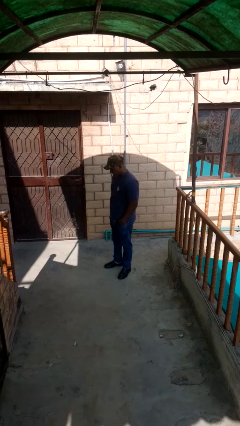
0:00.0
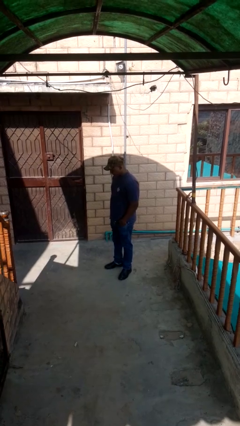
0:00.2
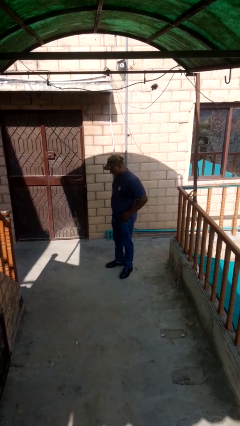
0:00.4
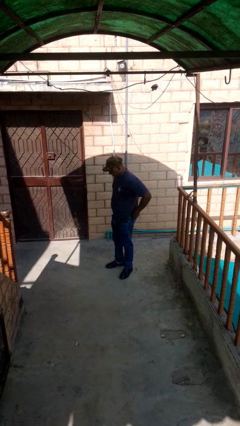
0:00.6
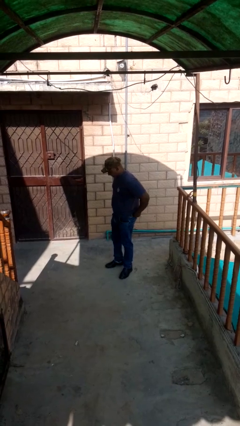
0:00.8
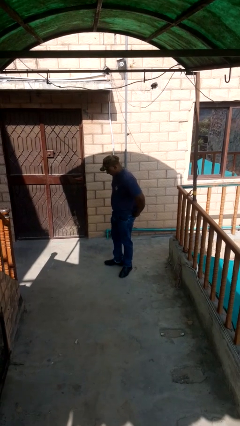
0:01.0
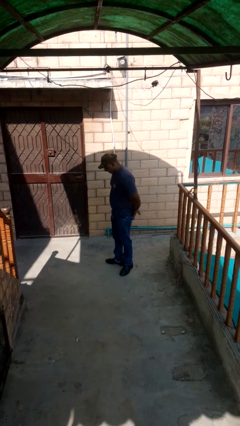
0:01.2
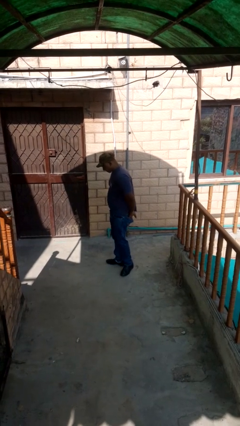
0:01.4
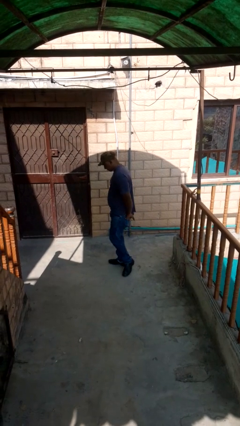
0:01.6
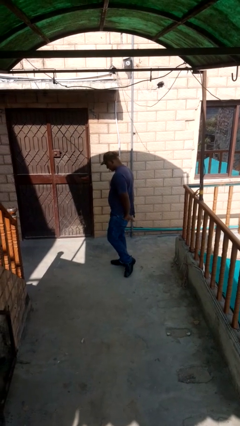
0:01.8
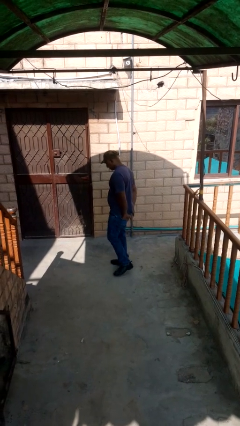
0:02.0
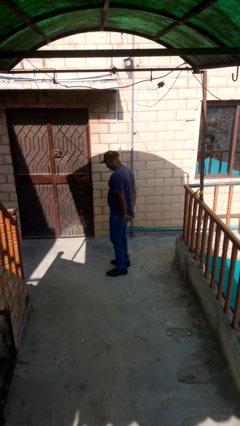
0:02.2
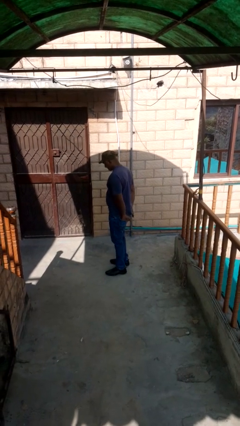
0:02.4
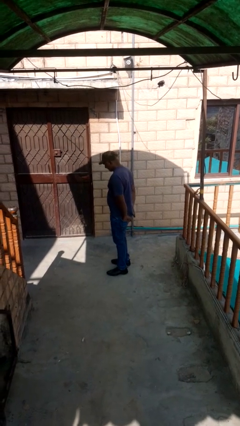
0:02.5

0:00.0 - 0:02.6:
person puts hands in back pockets

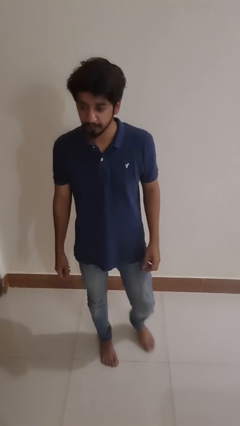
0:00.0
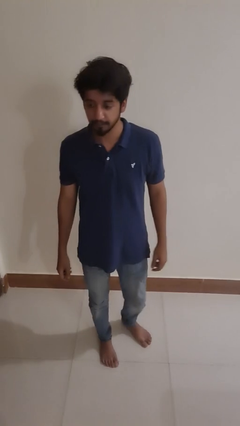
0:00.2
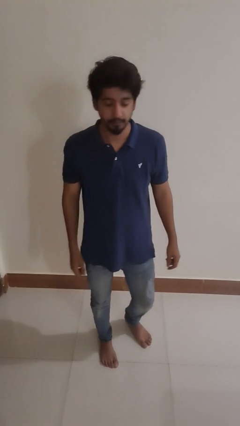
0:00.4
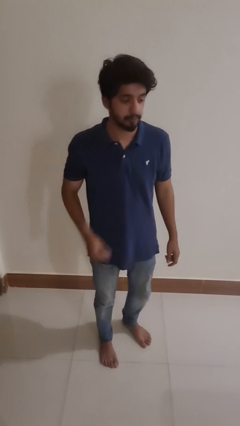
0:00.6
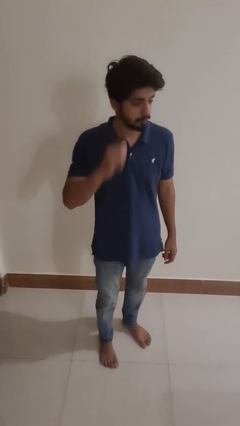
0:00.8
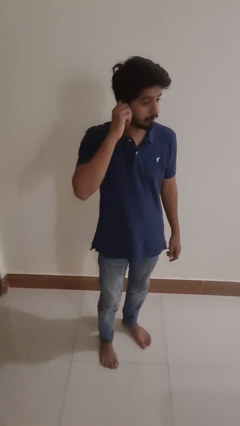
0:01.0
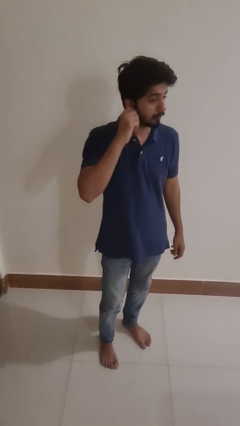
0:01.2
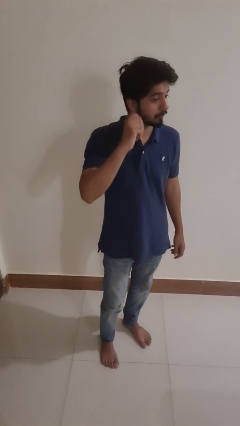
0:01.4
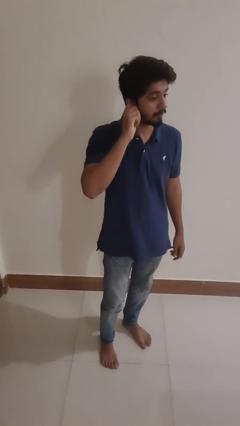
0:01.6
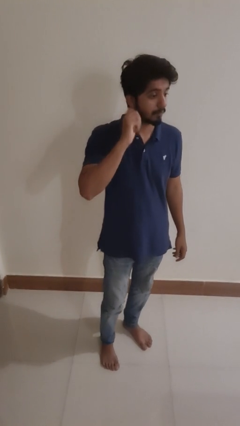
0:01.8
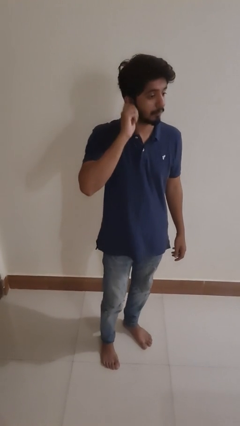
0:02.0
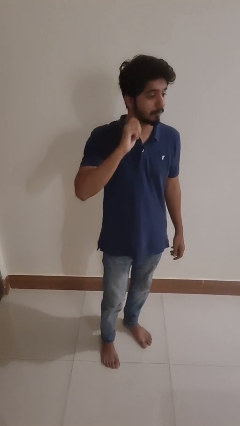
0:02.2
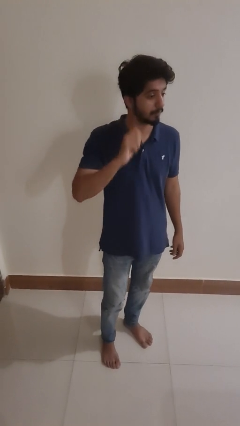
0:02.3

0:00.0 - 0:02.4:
person touches earlobe

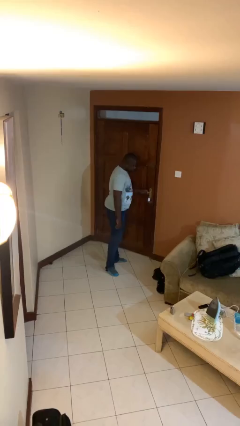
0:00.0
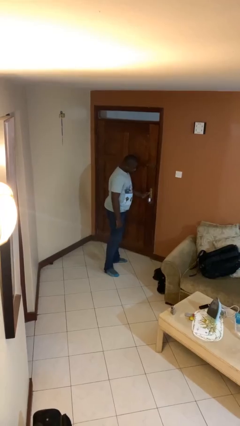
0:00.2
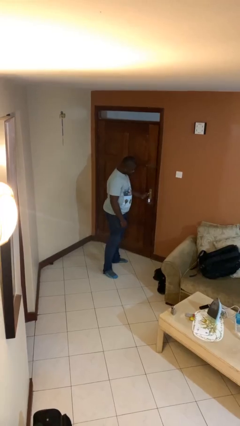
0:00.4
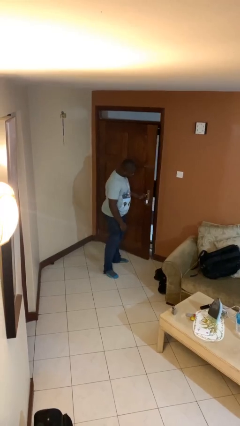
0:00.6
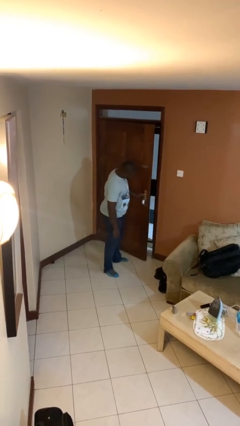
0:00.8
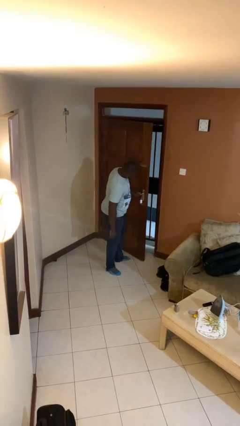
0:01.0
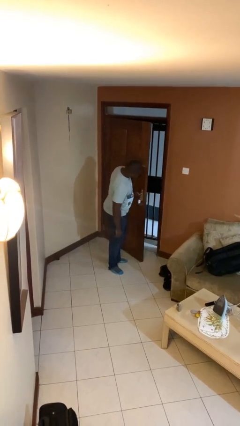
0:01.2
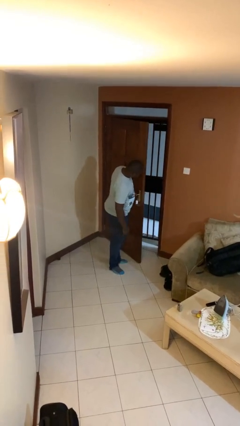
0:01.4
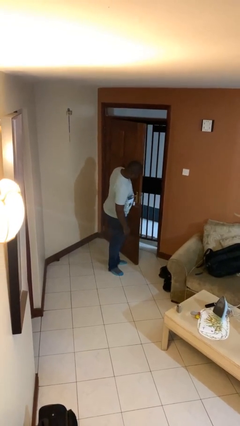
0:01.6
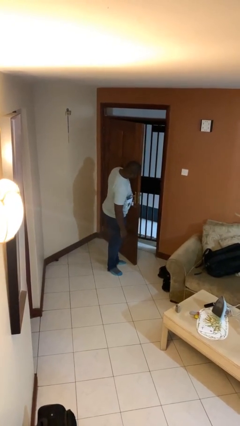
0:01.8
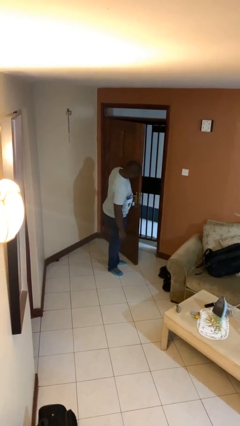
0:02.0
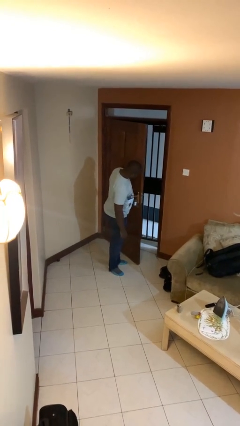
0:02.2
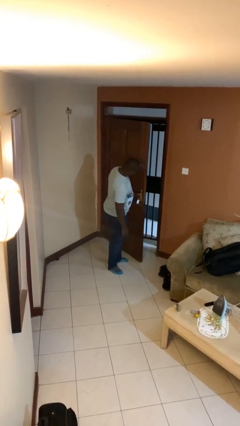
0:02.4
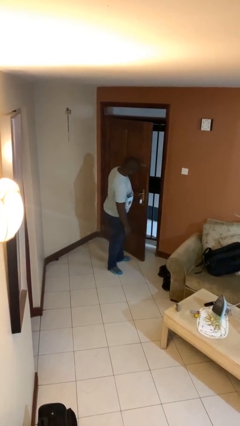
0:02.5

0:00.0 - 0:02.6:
person opens facility door

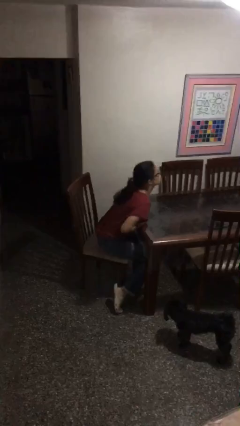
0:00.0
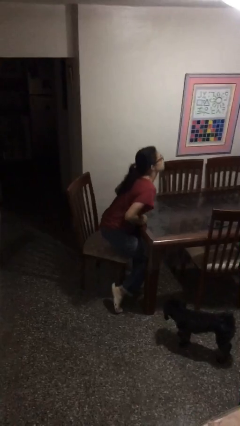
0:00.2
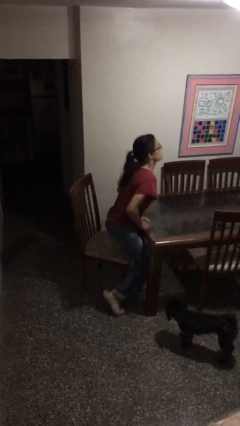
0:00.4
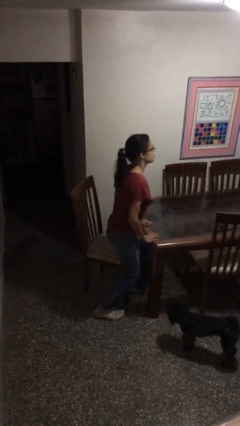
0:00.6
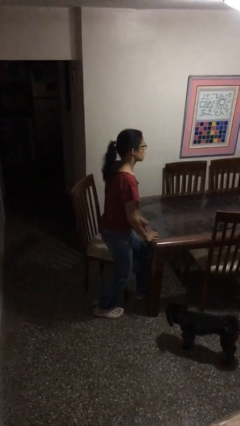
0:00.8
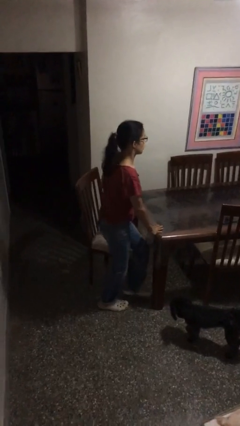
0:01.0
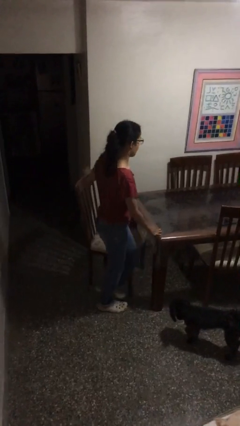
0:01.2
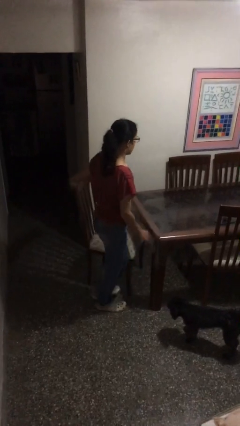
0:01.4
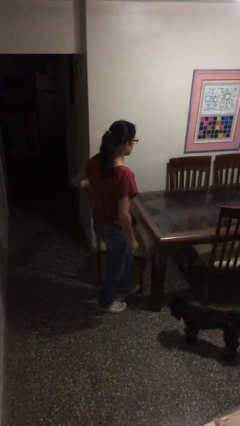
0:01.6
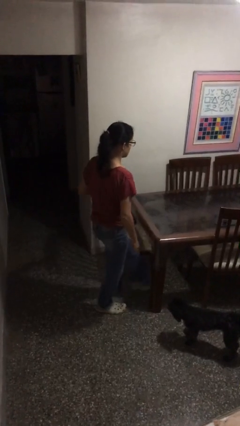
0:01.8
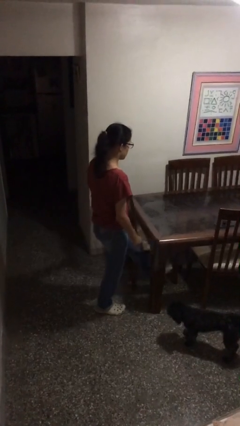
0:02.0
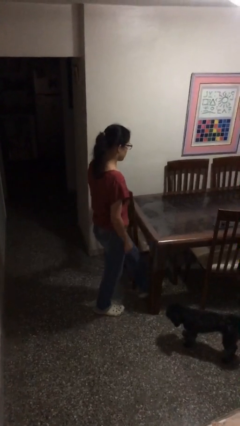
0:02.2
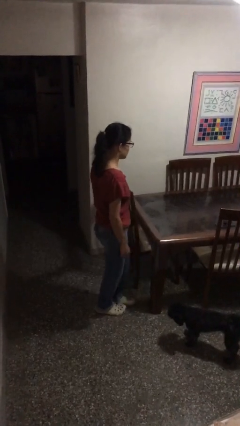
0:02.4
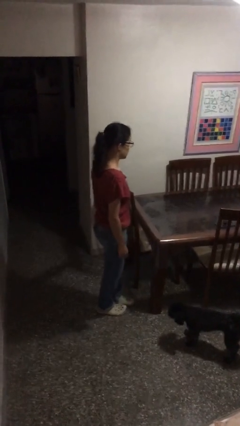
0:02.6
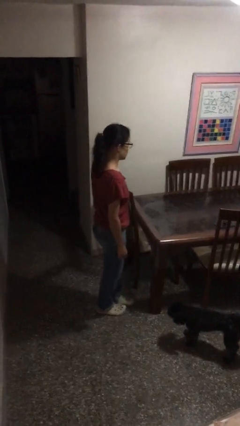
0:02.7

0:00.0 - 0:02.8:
person stands up

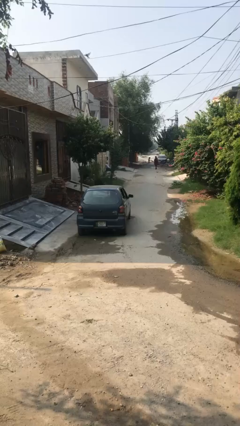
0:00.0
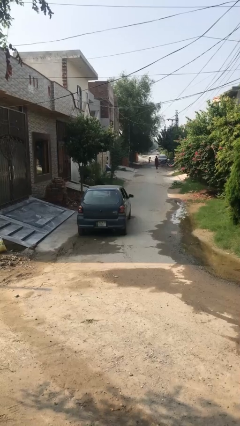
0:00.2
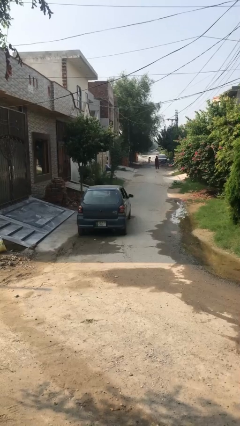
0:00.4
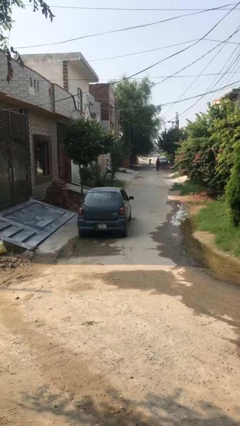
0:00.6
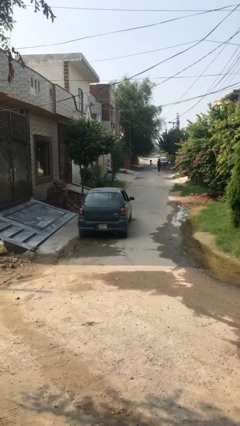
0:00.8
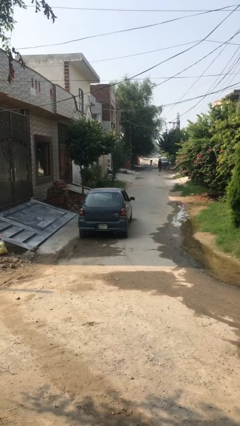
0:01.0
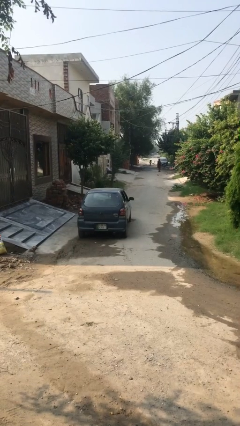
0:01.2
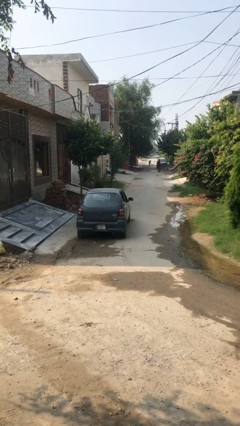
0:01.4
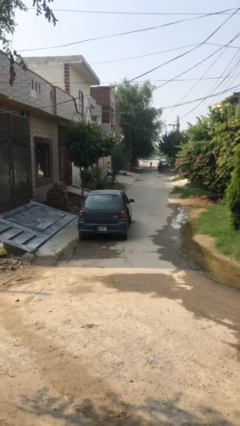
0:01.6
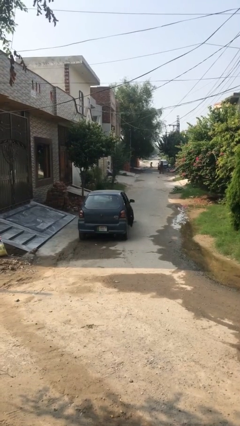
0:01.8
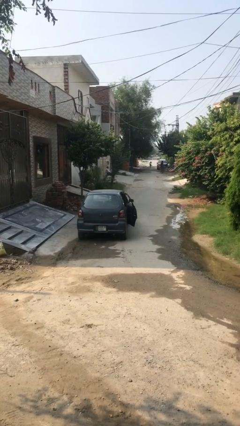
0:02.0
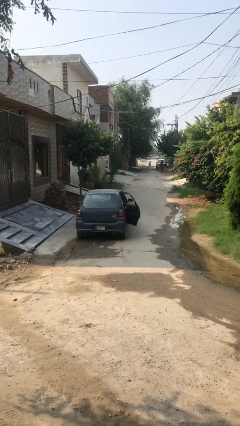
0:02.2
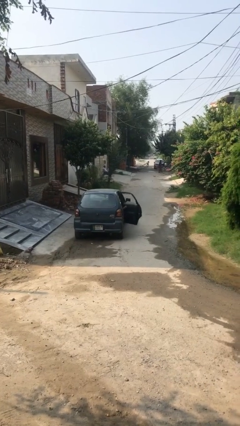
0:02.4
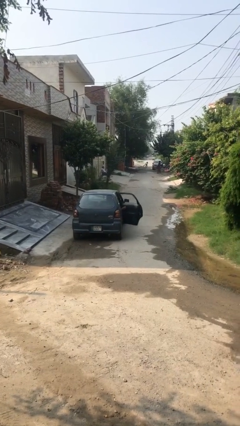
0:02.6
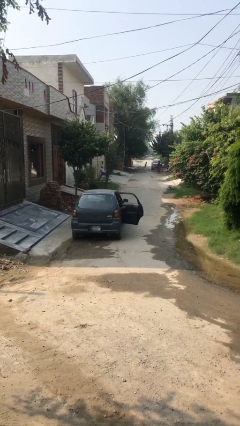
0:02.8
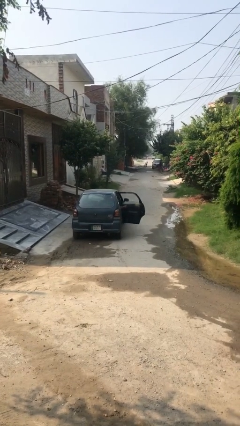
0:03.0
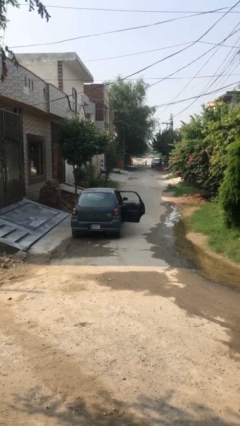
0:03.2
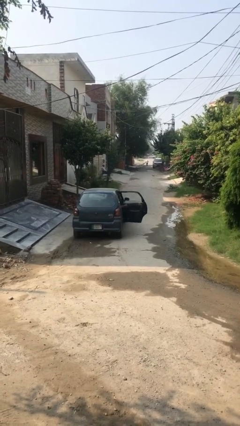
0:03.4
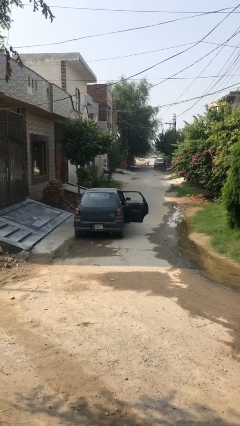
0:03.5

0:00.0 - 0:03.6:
person opens car door

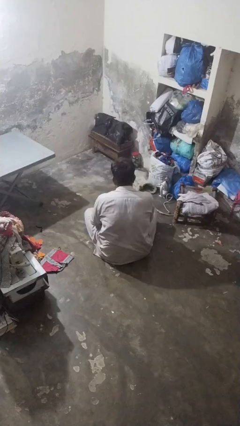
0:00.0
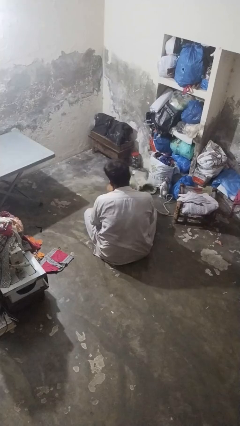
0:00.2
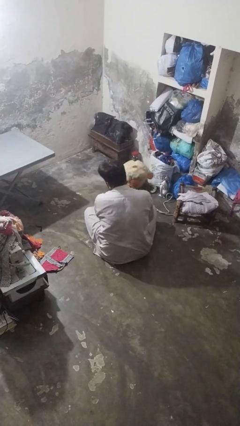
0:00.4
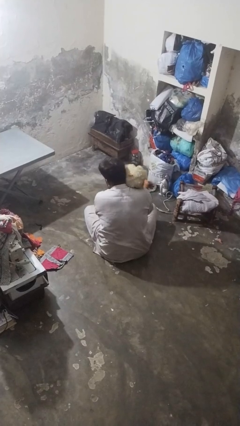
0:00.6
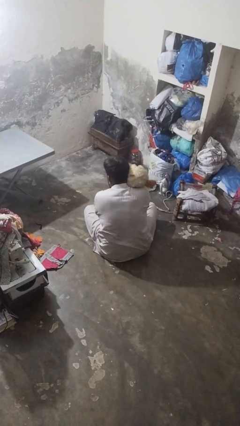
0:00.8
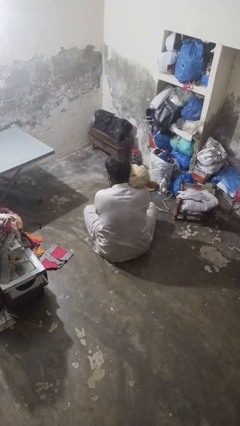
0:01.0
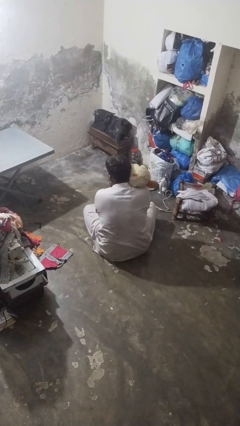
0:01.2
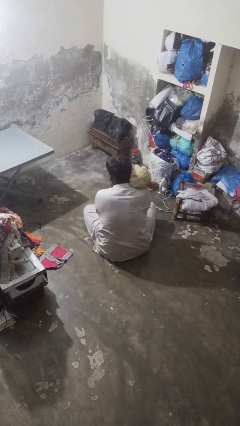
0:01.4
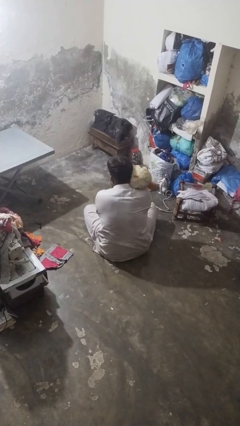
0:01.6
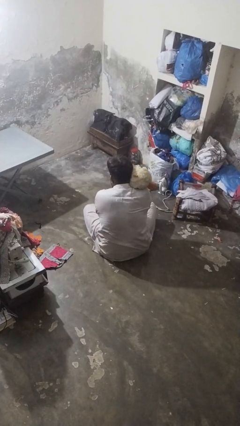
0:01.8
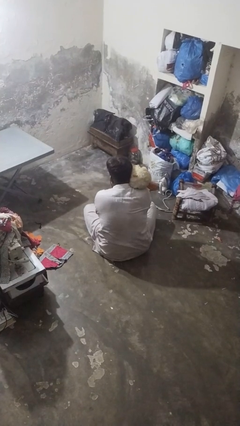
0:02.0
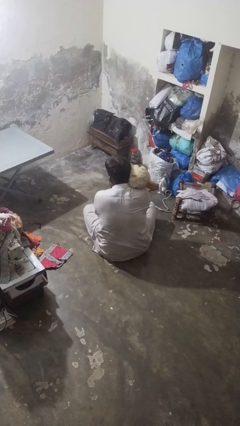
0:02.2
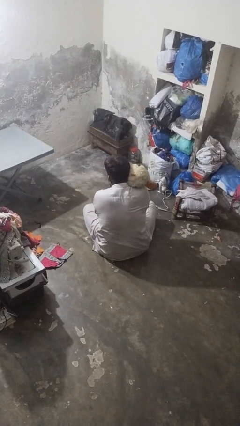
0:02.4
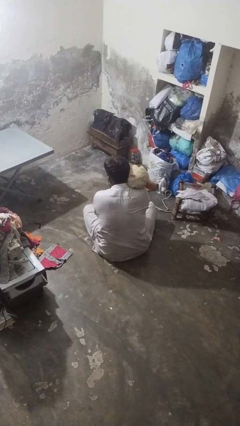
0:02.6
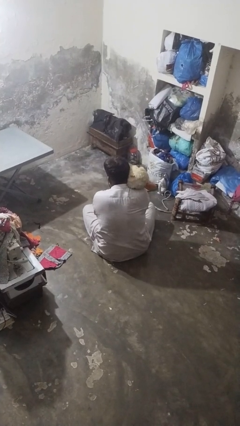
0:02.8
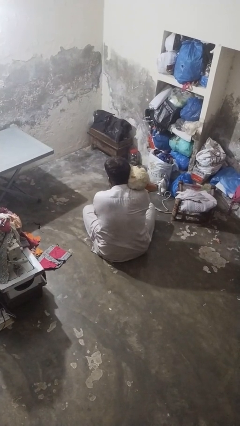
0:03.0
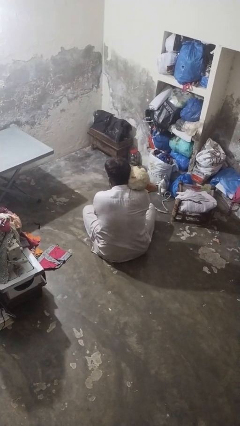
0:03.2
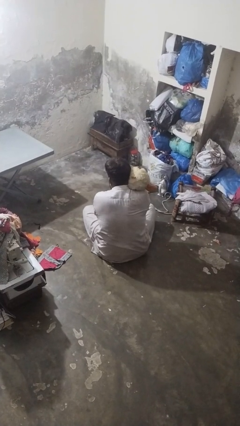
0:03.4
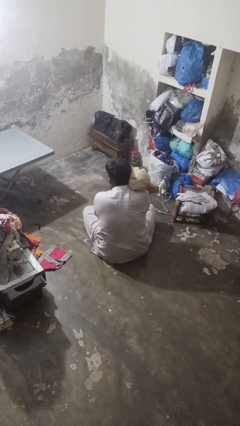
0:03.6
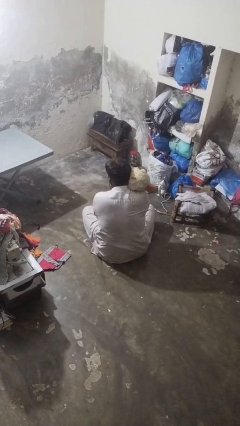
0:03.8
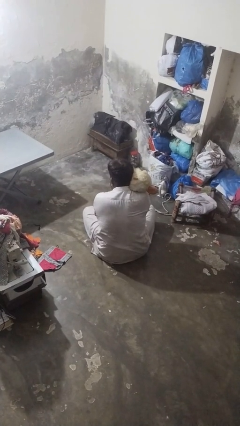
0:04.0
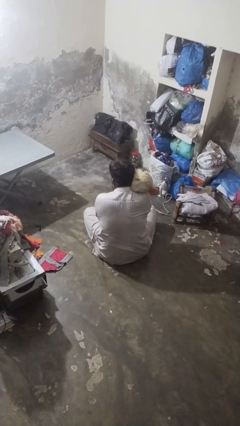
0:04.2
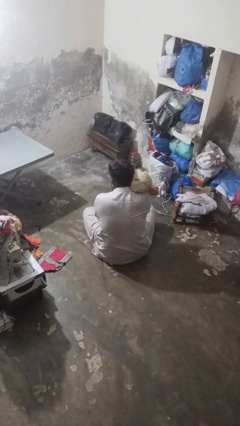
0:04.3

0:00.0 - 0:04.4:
person hugs stuffed animal
